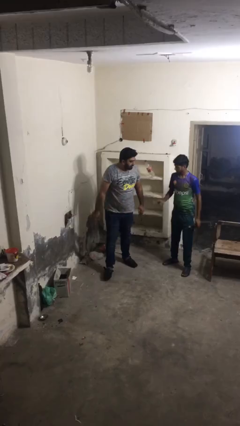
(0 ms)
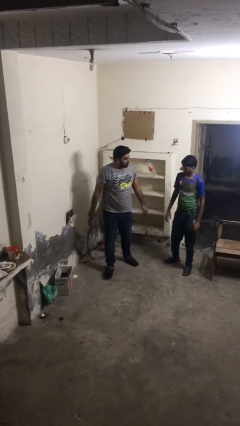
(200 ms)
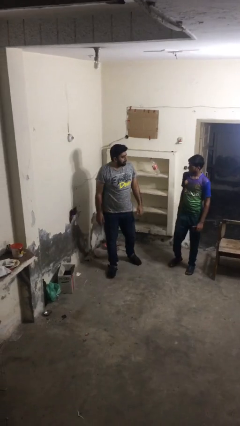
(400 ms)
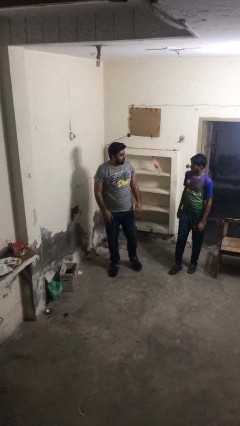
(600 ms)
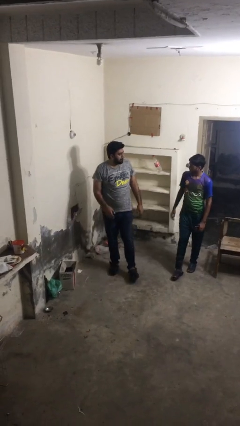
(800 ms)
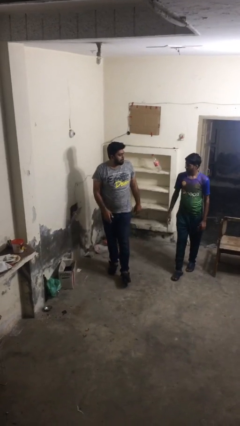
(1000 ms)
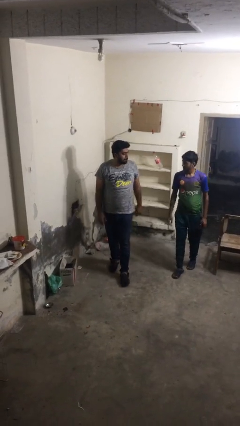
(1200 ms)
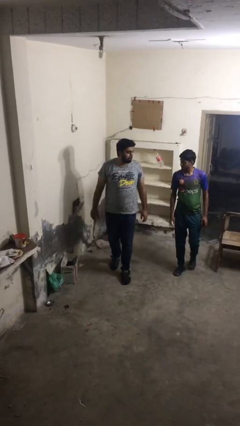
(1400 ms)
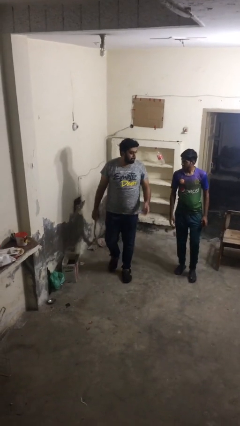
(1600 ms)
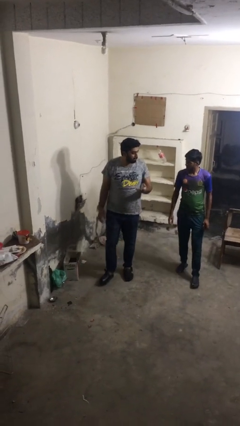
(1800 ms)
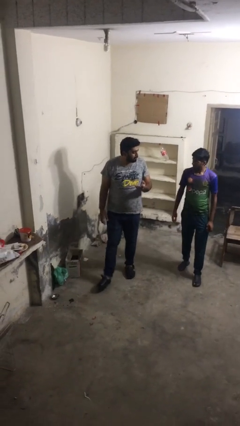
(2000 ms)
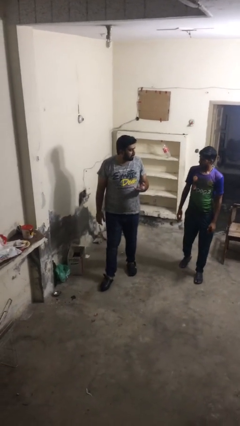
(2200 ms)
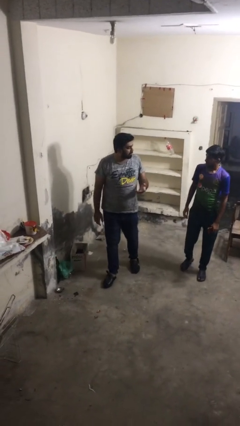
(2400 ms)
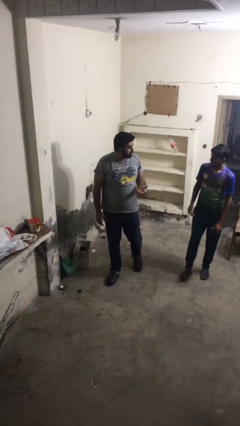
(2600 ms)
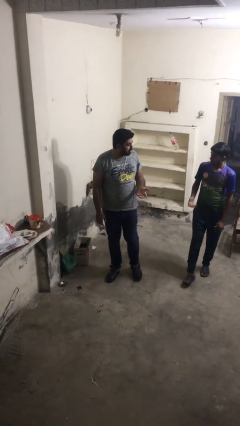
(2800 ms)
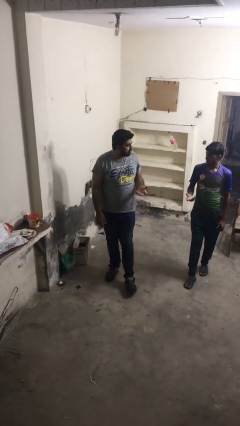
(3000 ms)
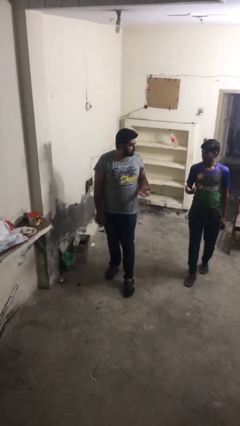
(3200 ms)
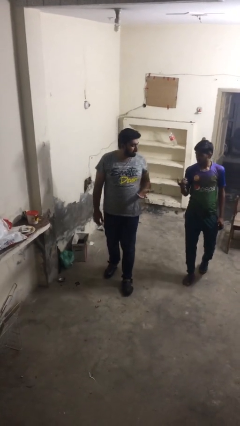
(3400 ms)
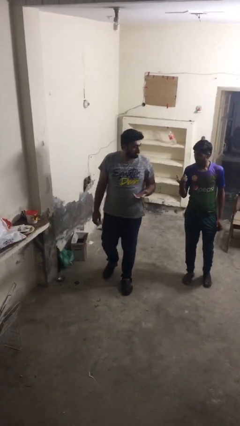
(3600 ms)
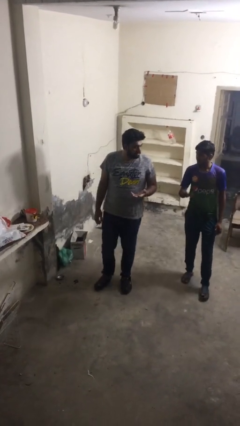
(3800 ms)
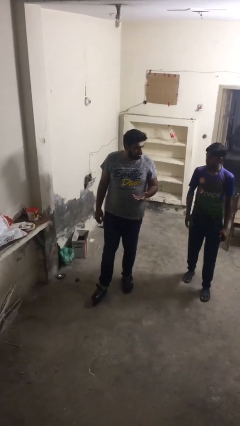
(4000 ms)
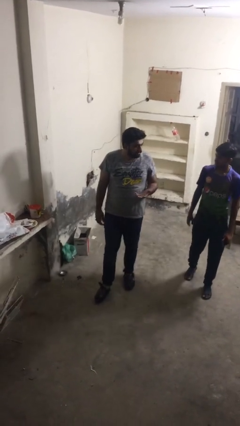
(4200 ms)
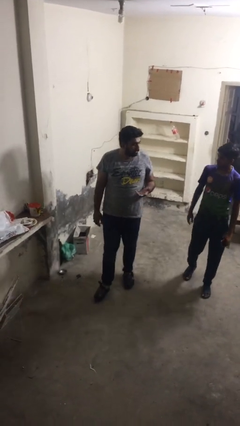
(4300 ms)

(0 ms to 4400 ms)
person talks to person

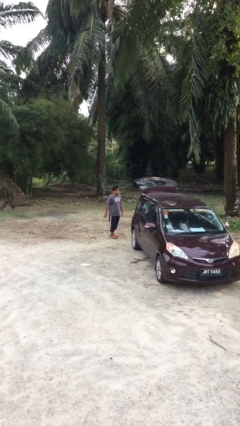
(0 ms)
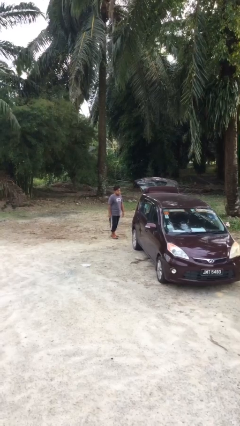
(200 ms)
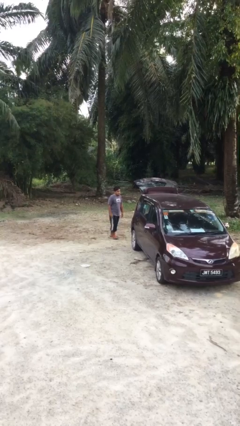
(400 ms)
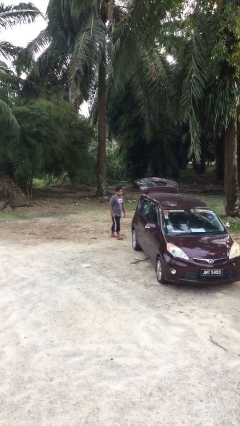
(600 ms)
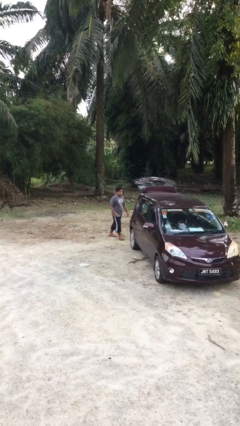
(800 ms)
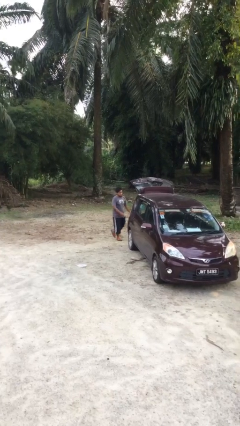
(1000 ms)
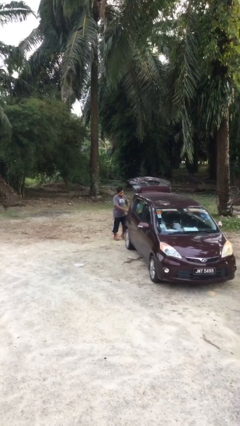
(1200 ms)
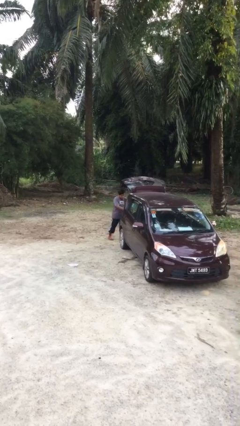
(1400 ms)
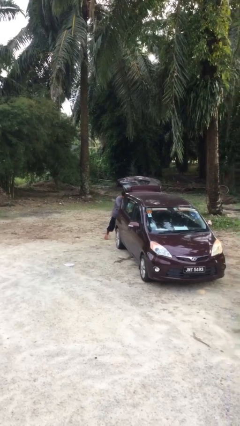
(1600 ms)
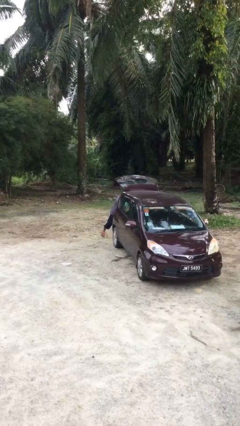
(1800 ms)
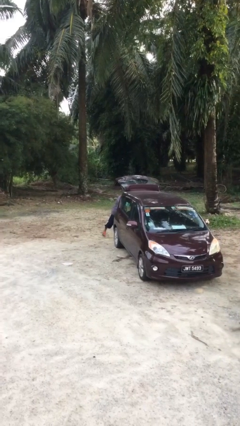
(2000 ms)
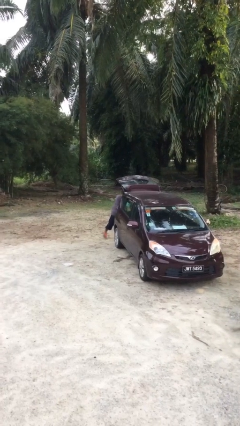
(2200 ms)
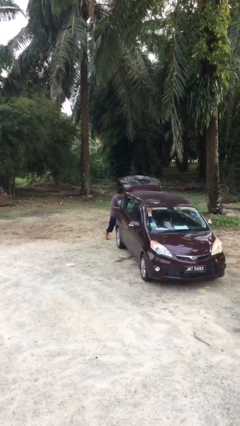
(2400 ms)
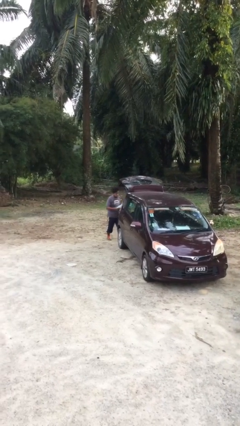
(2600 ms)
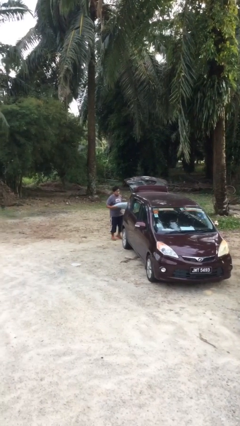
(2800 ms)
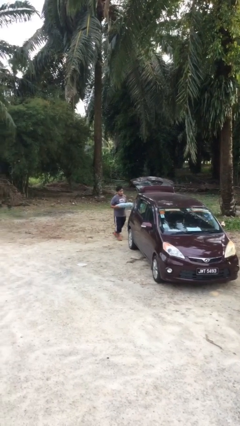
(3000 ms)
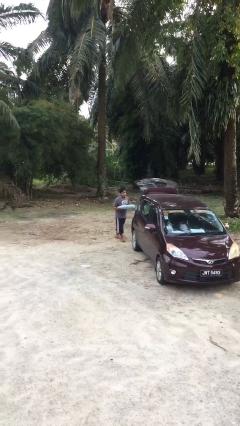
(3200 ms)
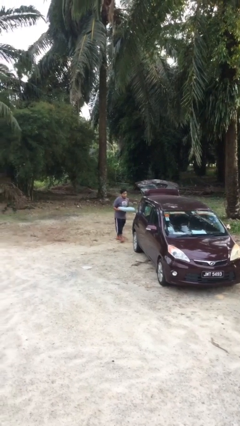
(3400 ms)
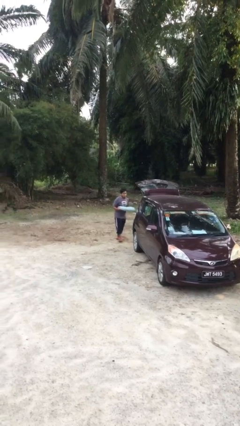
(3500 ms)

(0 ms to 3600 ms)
person unloads car

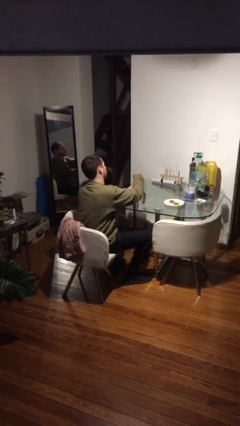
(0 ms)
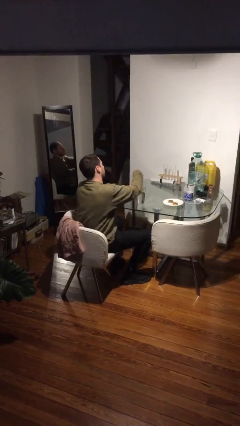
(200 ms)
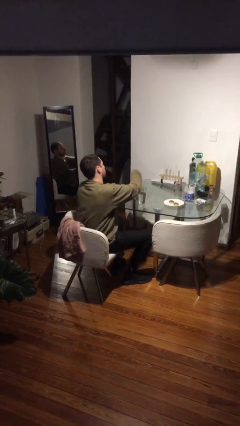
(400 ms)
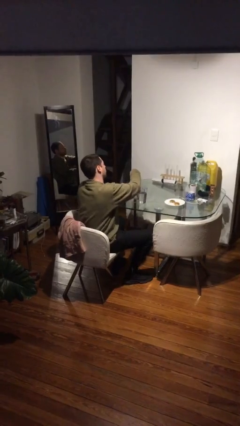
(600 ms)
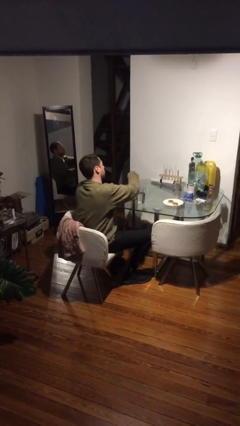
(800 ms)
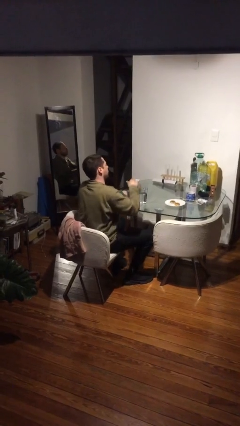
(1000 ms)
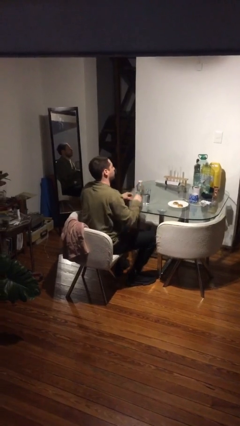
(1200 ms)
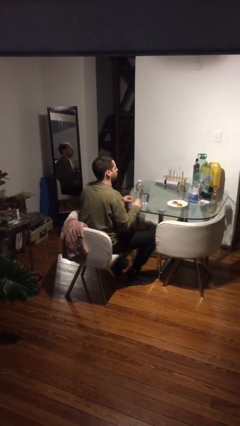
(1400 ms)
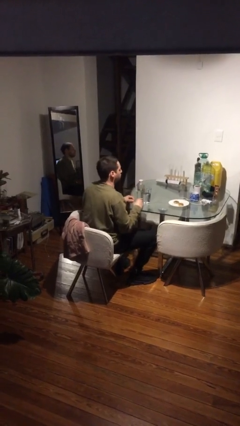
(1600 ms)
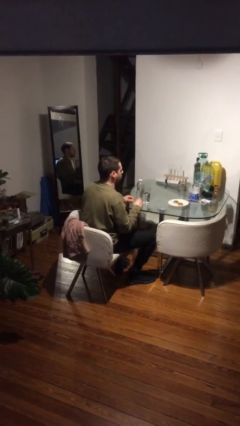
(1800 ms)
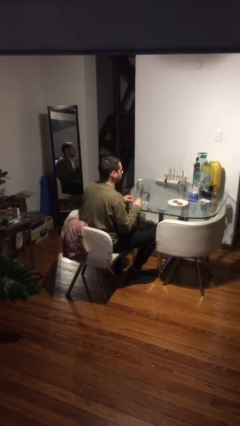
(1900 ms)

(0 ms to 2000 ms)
person screws lid to bottle

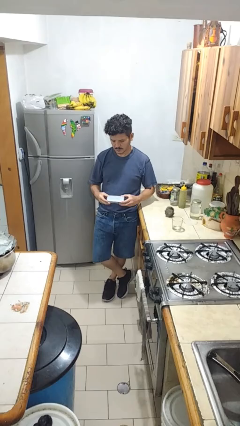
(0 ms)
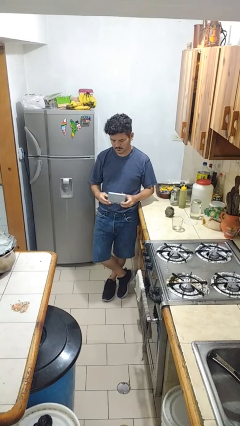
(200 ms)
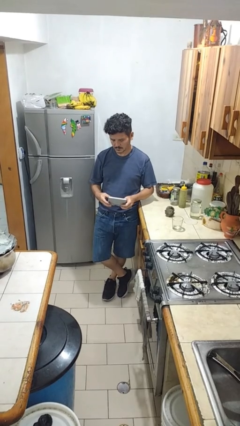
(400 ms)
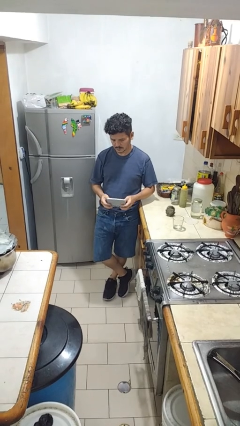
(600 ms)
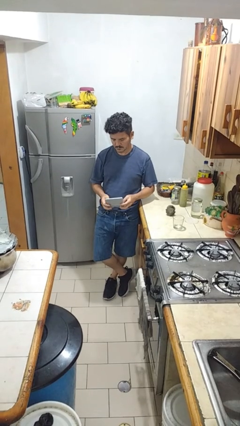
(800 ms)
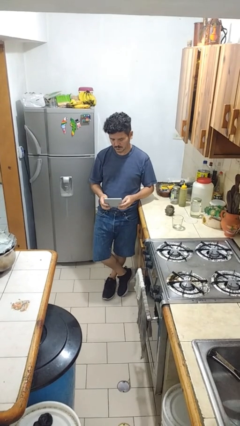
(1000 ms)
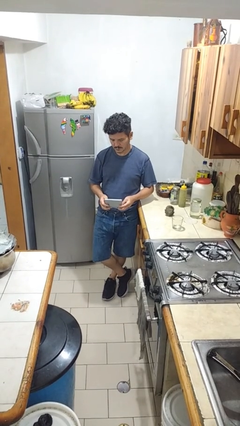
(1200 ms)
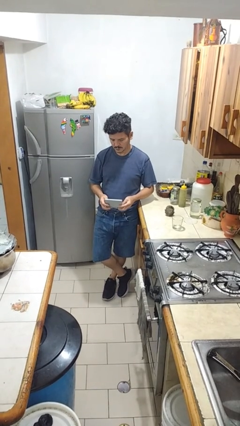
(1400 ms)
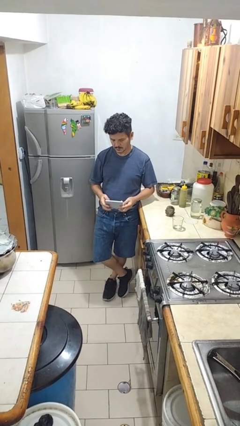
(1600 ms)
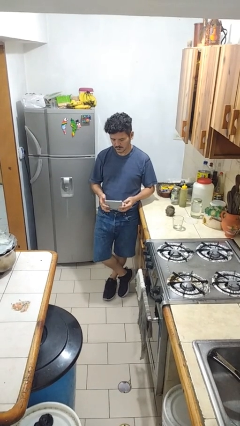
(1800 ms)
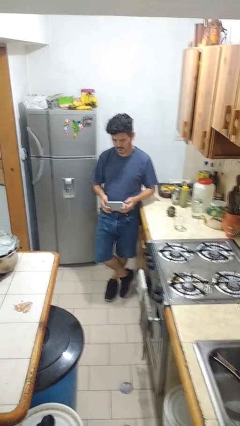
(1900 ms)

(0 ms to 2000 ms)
person interacts with handheld game

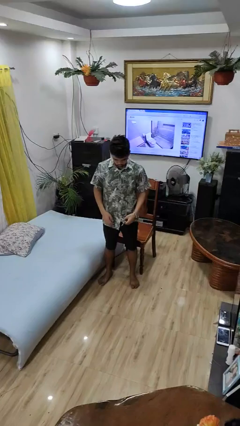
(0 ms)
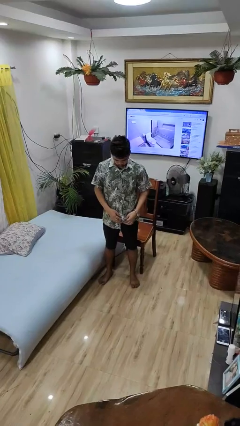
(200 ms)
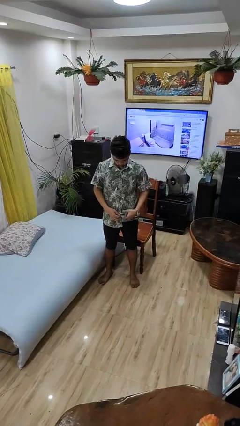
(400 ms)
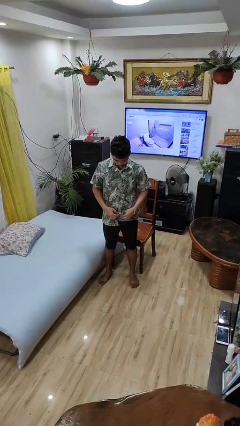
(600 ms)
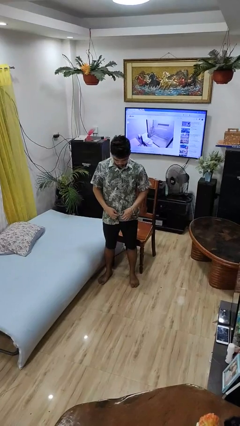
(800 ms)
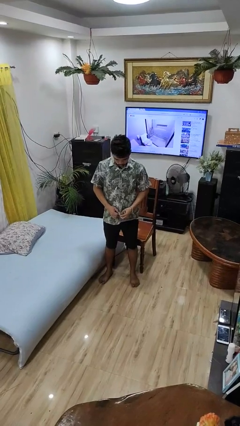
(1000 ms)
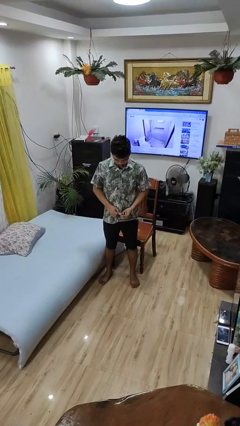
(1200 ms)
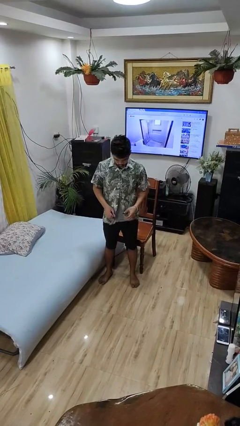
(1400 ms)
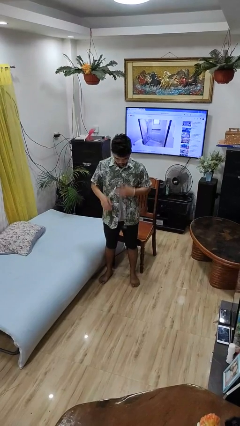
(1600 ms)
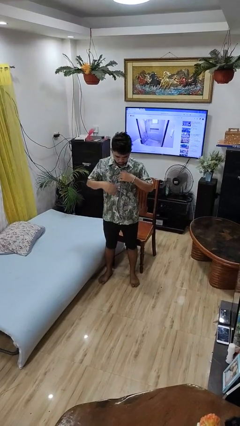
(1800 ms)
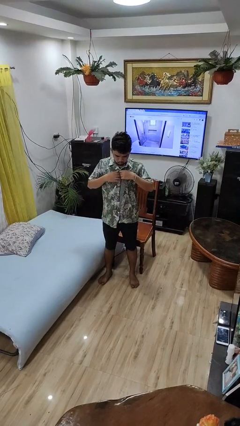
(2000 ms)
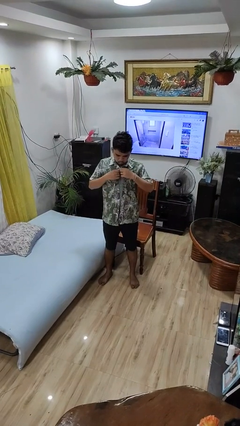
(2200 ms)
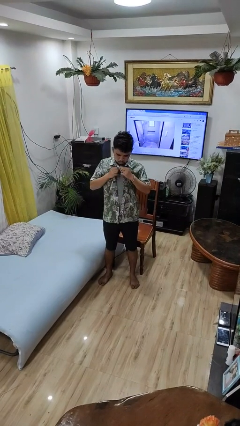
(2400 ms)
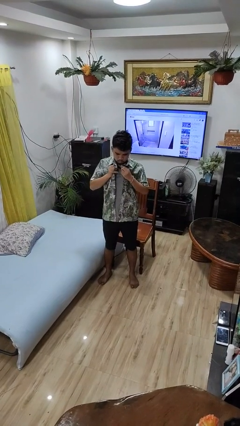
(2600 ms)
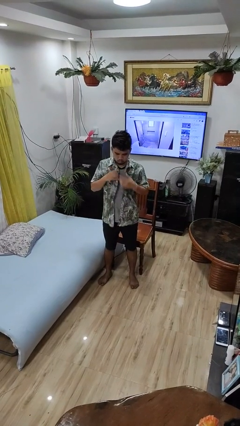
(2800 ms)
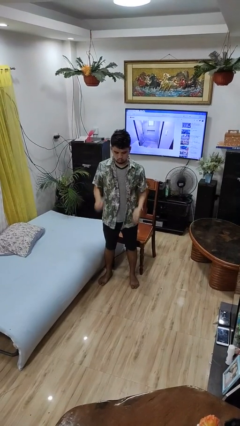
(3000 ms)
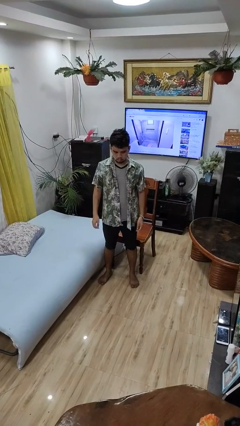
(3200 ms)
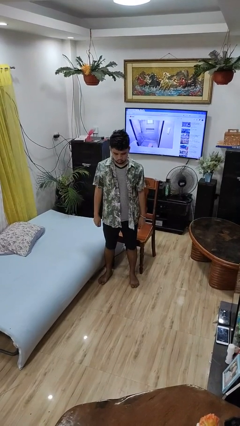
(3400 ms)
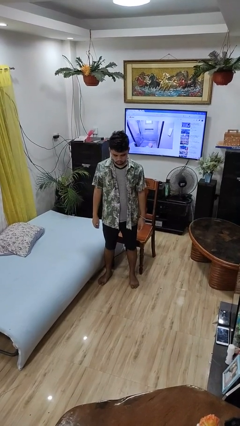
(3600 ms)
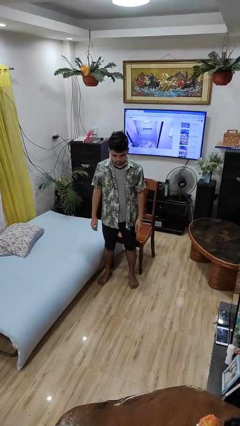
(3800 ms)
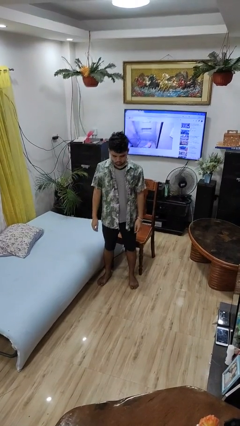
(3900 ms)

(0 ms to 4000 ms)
person unbuttons shirt

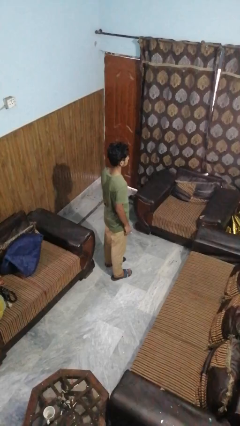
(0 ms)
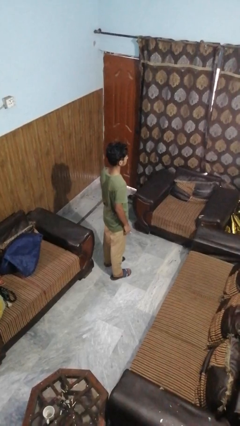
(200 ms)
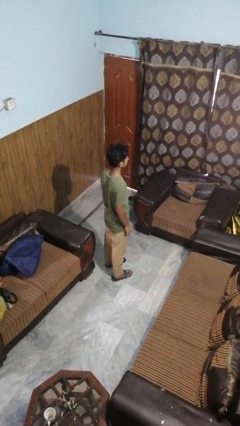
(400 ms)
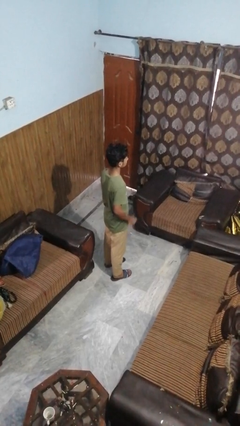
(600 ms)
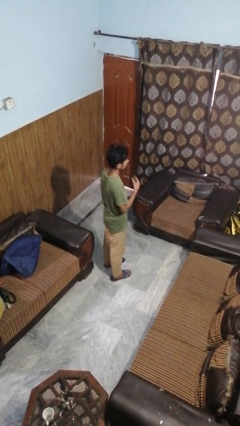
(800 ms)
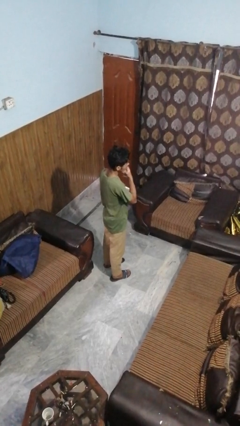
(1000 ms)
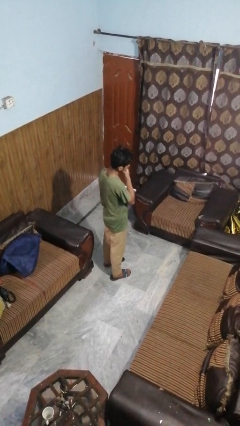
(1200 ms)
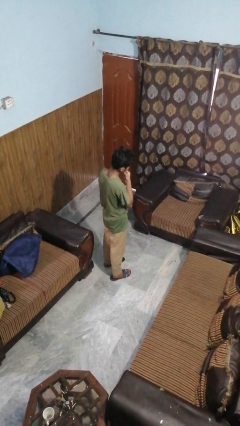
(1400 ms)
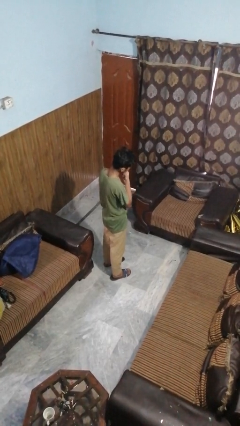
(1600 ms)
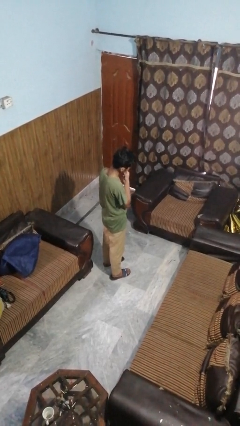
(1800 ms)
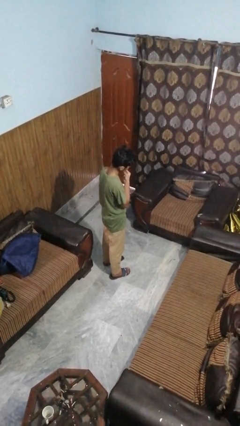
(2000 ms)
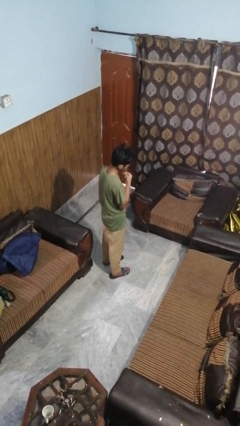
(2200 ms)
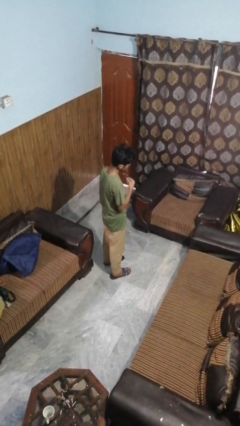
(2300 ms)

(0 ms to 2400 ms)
person strokes chin
